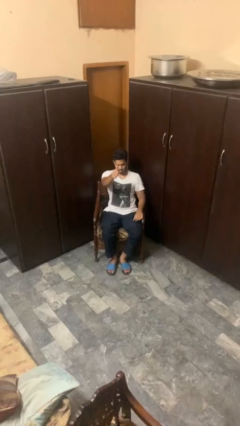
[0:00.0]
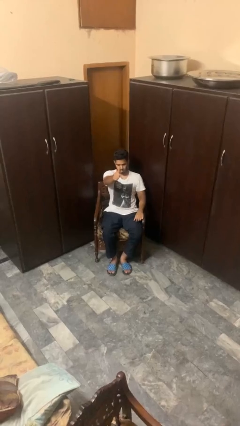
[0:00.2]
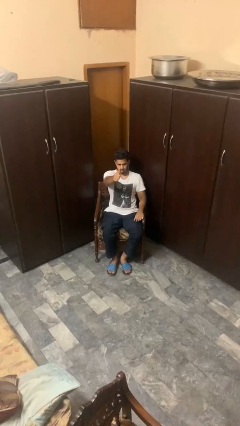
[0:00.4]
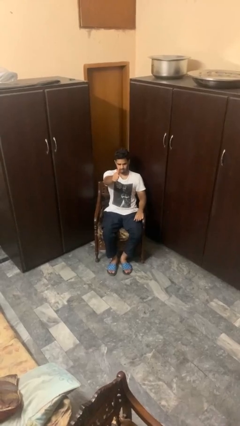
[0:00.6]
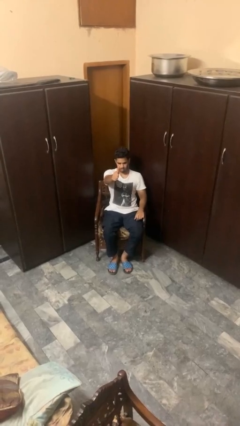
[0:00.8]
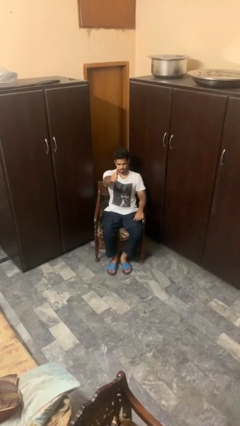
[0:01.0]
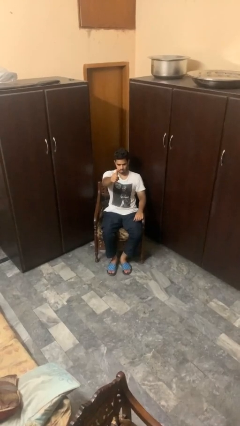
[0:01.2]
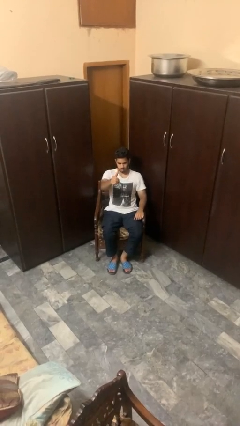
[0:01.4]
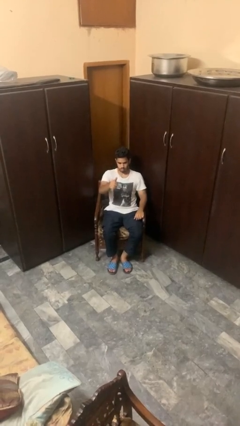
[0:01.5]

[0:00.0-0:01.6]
person gestures thumbs up

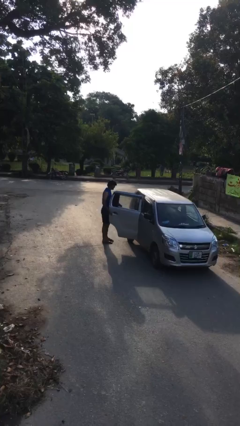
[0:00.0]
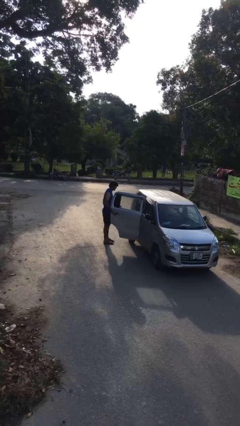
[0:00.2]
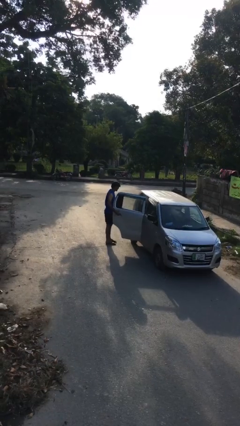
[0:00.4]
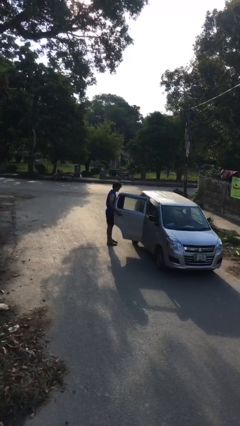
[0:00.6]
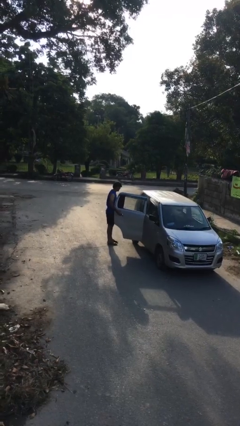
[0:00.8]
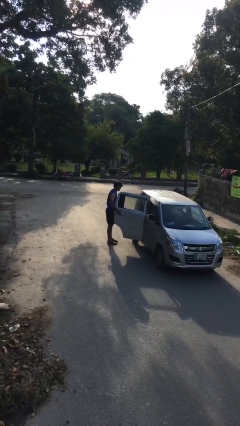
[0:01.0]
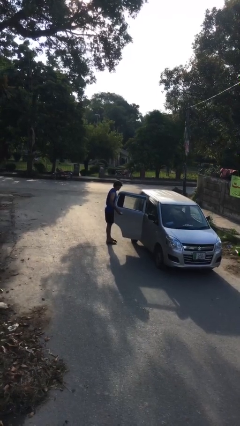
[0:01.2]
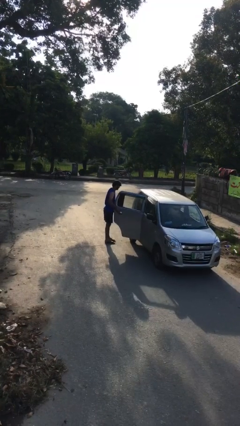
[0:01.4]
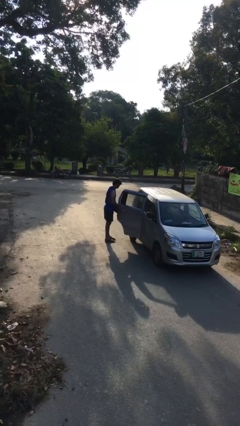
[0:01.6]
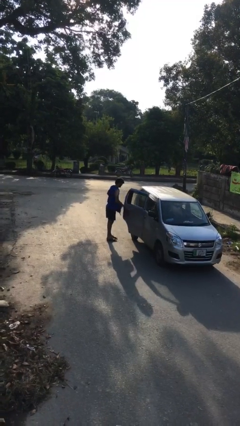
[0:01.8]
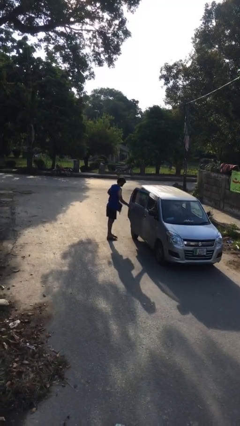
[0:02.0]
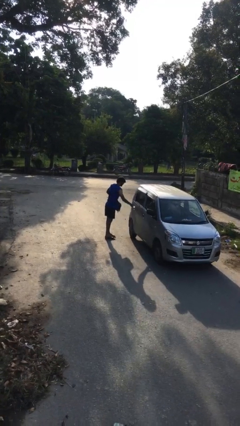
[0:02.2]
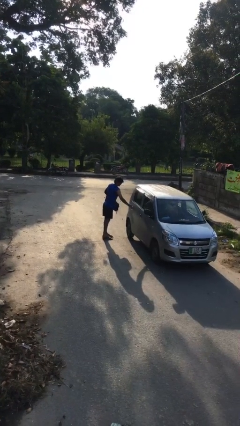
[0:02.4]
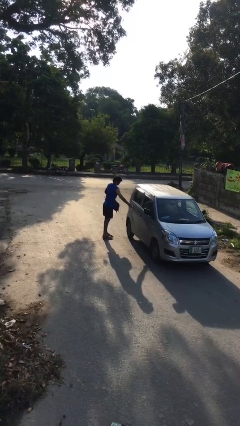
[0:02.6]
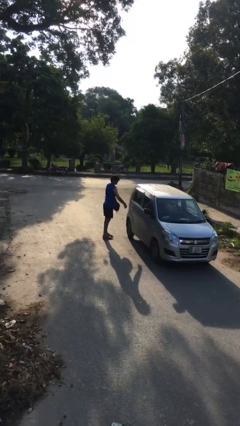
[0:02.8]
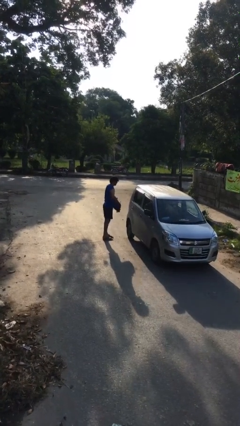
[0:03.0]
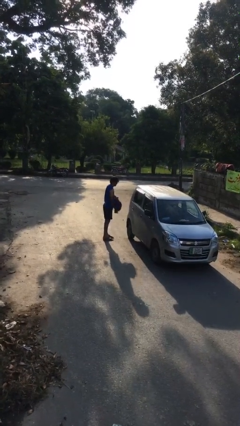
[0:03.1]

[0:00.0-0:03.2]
person closes car door

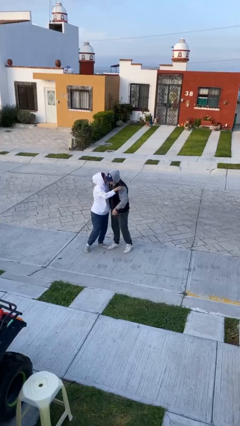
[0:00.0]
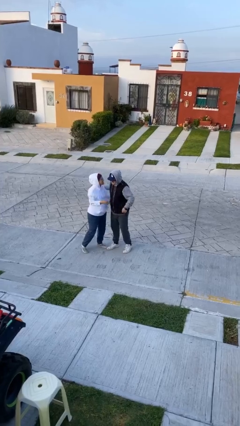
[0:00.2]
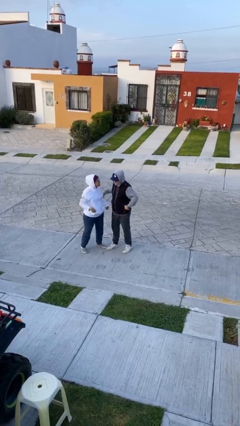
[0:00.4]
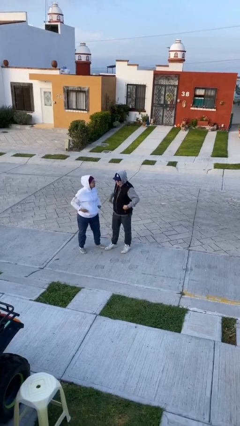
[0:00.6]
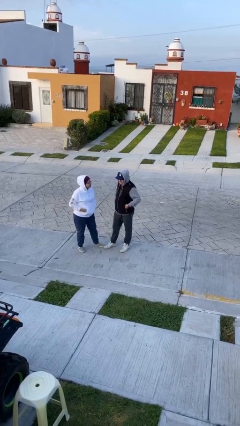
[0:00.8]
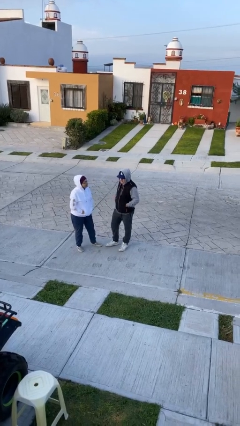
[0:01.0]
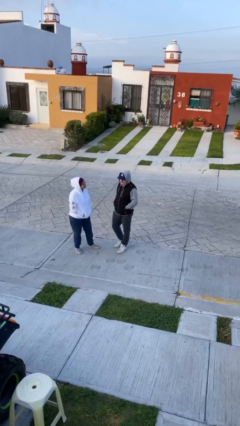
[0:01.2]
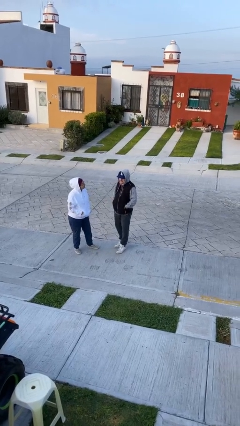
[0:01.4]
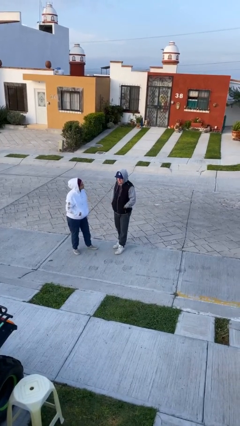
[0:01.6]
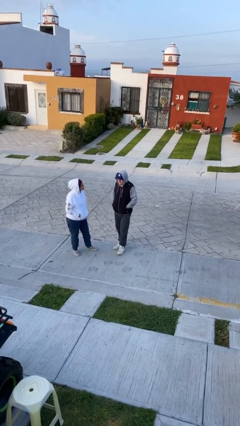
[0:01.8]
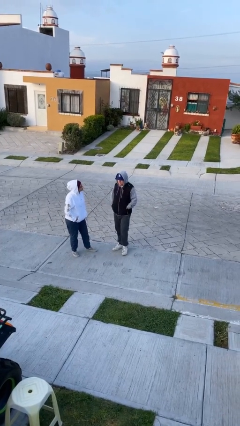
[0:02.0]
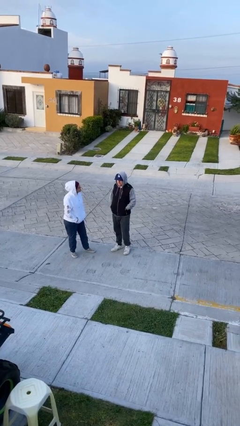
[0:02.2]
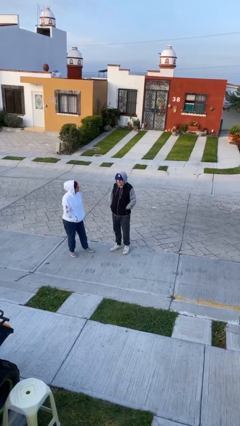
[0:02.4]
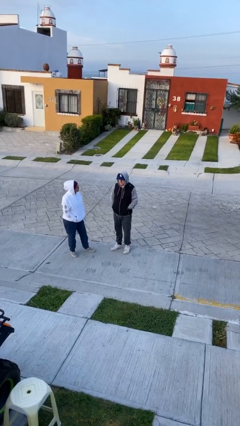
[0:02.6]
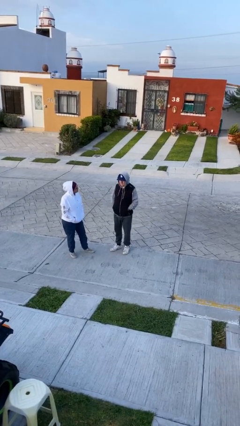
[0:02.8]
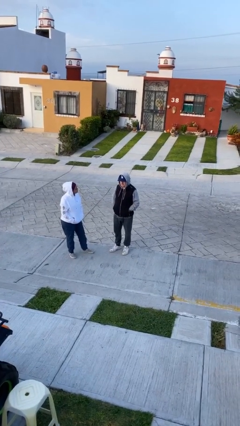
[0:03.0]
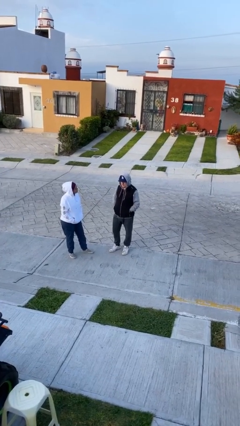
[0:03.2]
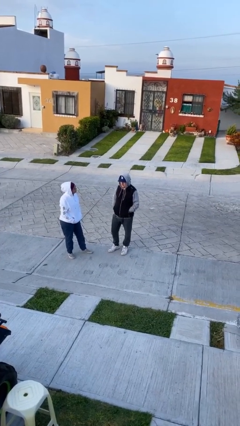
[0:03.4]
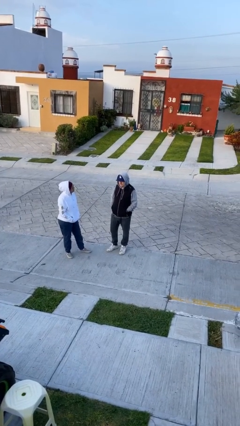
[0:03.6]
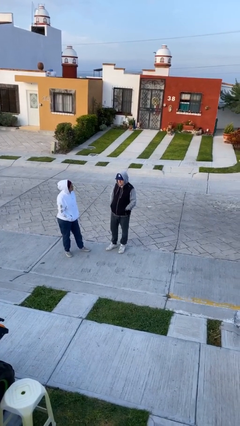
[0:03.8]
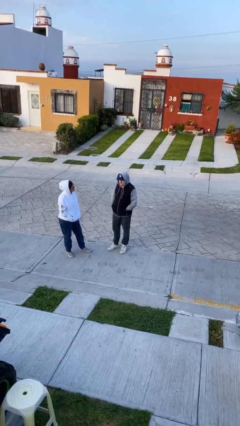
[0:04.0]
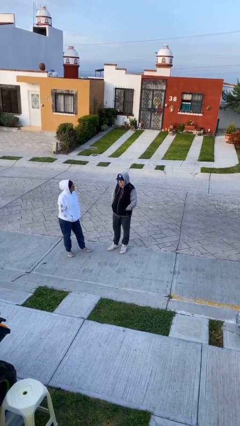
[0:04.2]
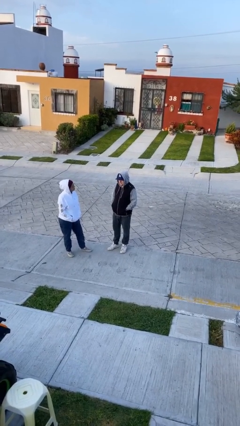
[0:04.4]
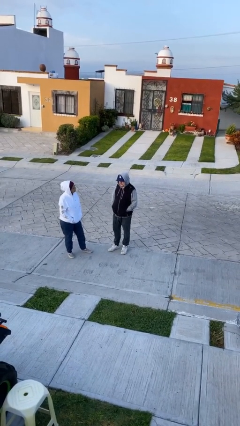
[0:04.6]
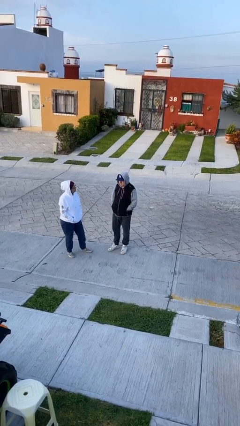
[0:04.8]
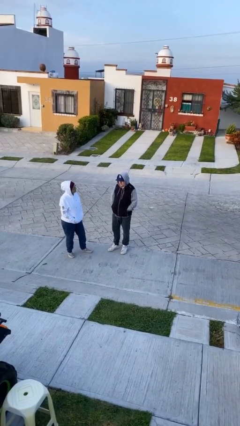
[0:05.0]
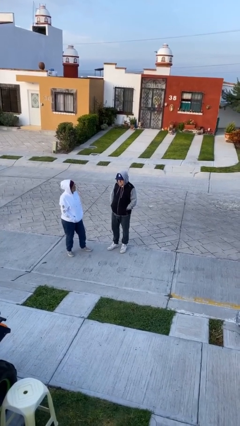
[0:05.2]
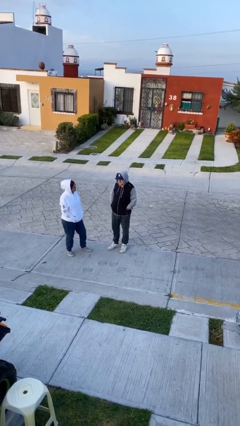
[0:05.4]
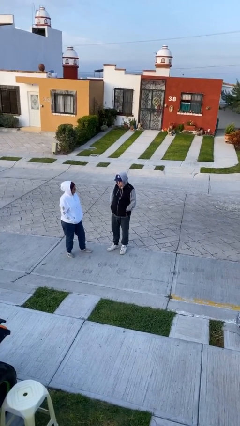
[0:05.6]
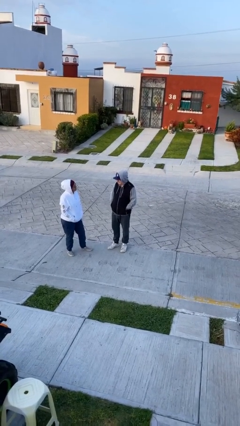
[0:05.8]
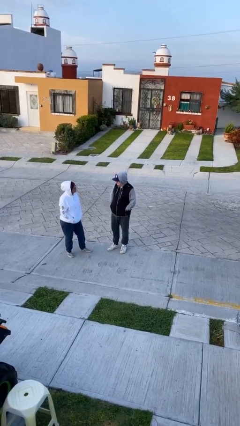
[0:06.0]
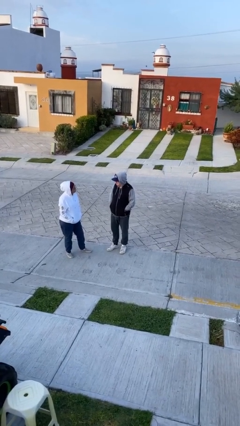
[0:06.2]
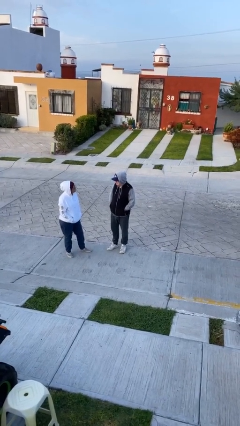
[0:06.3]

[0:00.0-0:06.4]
person talks to person

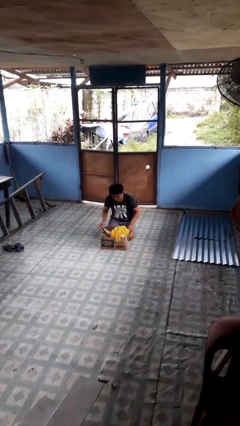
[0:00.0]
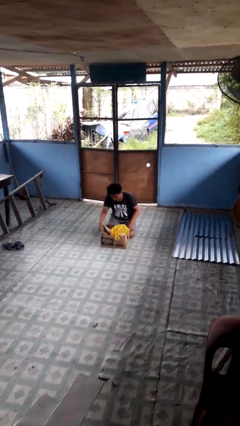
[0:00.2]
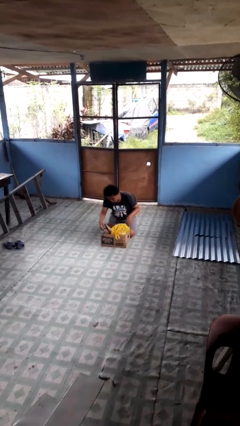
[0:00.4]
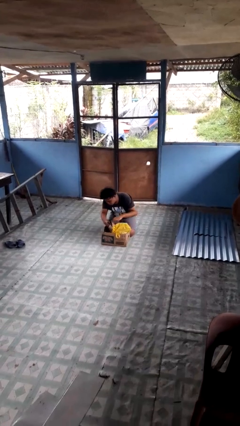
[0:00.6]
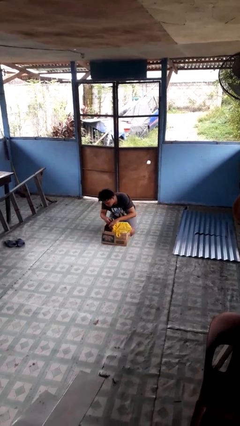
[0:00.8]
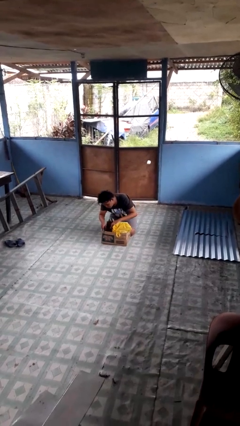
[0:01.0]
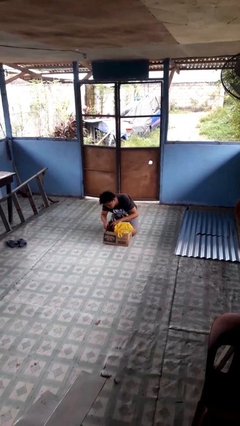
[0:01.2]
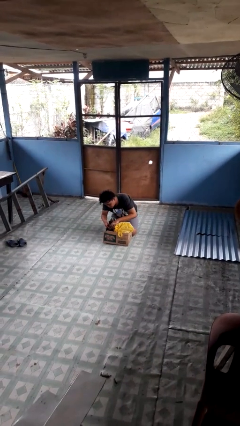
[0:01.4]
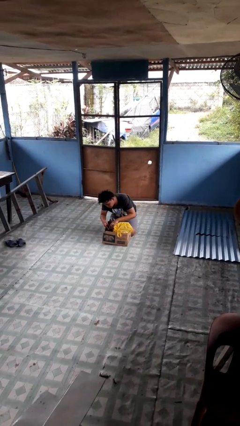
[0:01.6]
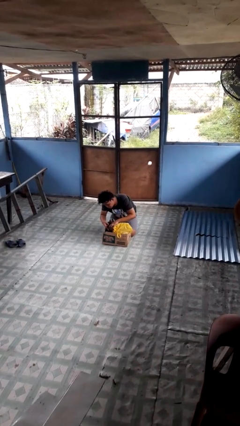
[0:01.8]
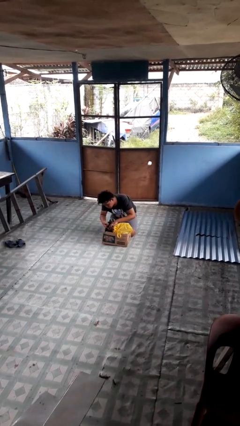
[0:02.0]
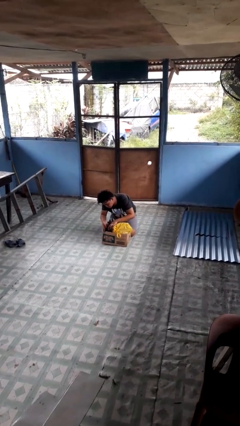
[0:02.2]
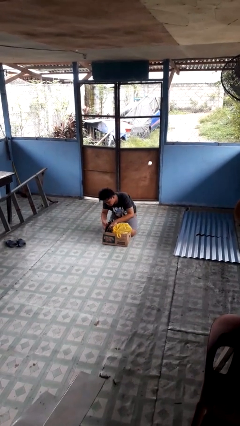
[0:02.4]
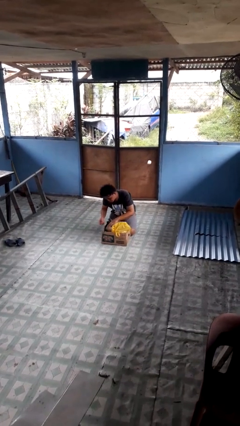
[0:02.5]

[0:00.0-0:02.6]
person searches in box

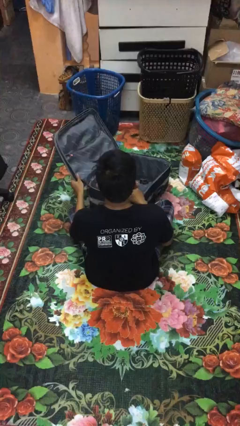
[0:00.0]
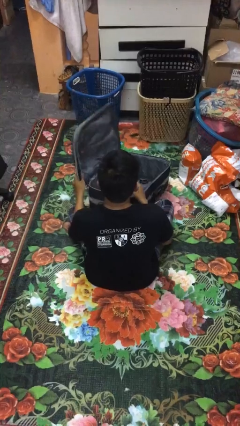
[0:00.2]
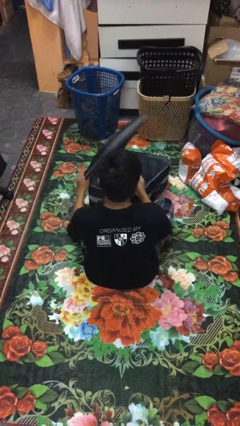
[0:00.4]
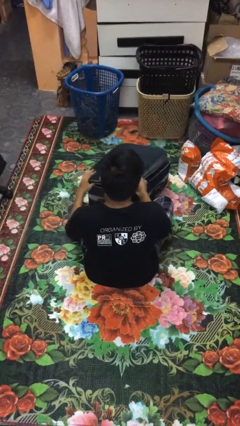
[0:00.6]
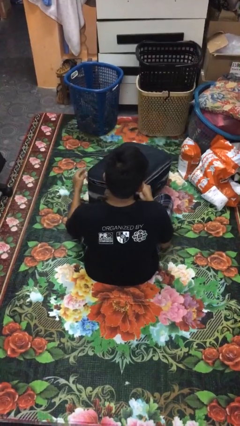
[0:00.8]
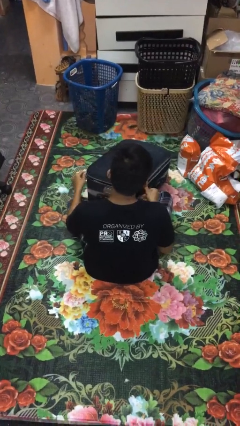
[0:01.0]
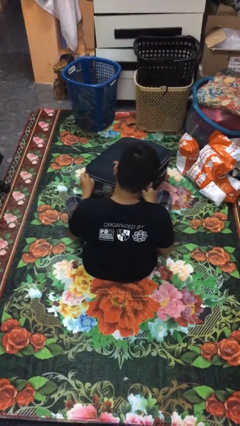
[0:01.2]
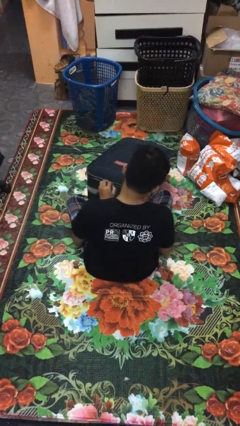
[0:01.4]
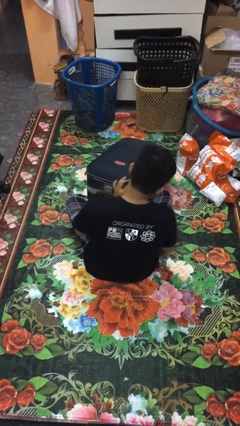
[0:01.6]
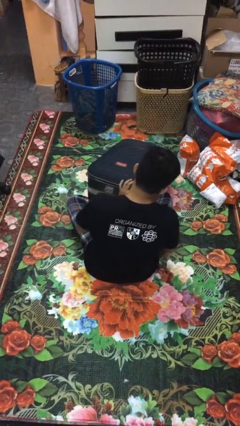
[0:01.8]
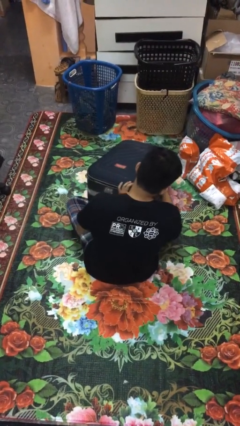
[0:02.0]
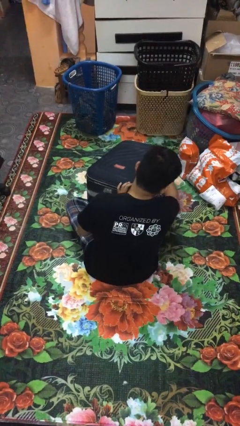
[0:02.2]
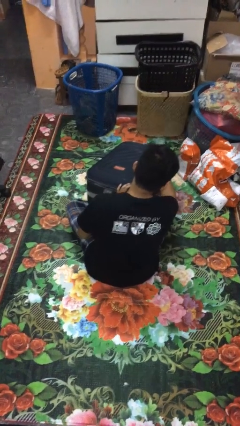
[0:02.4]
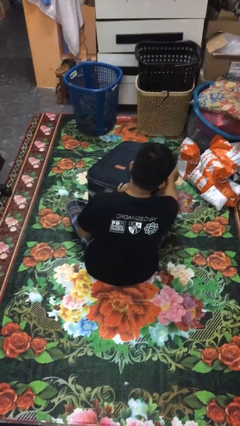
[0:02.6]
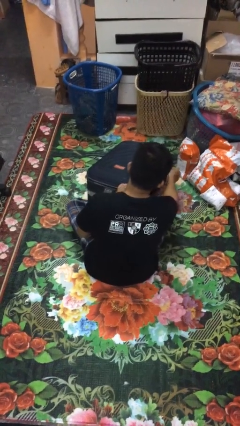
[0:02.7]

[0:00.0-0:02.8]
person closes suitcase

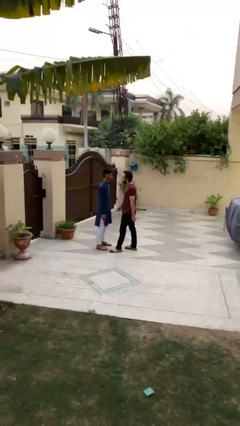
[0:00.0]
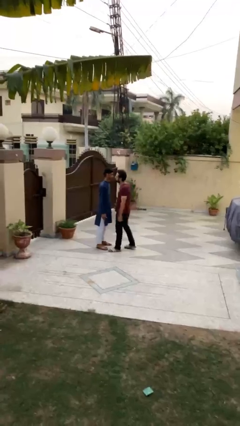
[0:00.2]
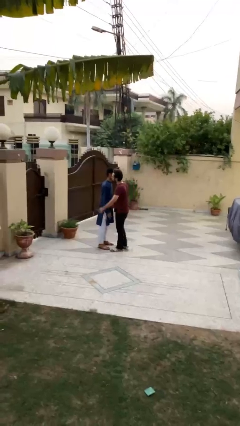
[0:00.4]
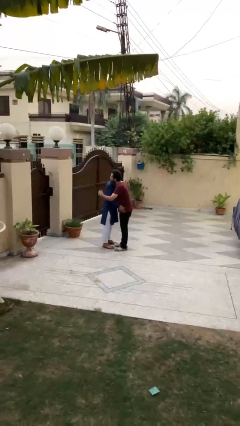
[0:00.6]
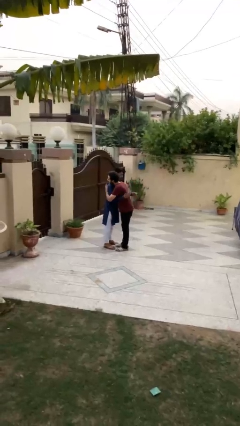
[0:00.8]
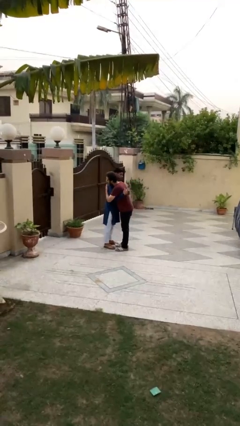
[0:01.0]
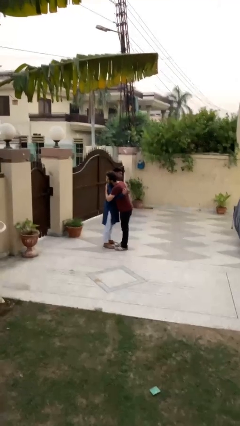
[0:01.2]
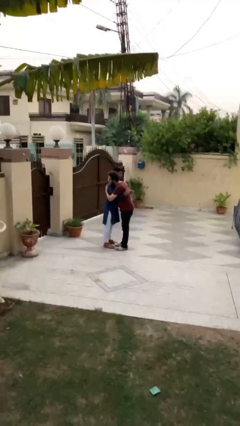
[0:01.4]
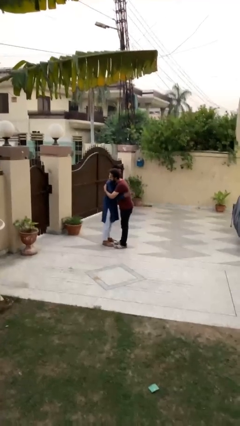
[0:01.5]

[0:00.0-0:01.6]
person embraces person
